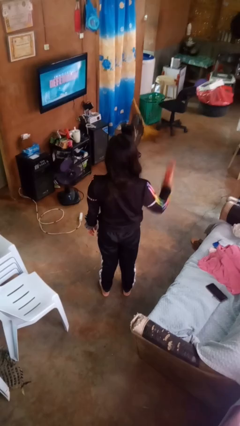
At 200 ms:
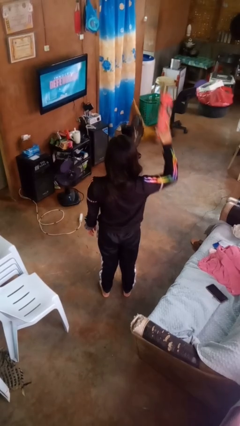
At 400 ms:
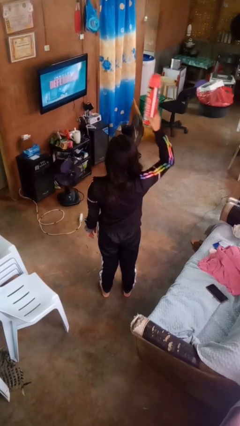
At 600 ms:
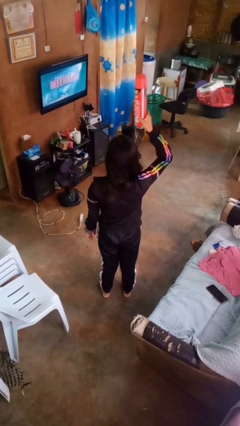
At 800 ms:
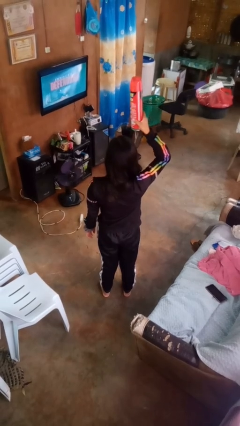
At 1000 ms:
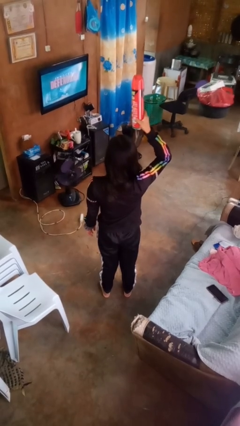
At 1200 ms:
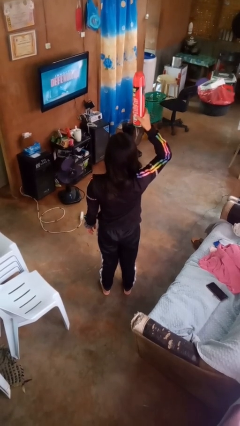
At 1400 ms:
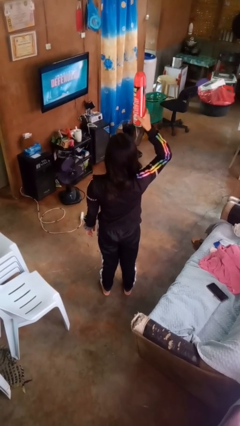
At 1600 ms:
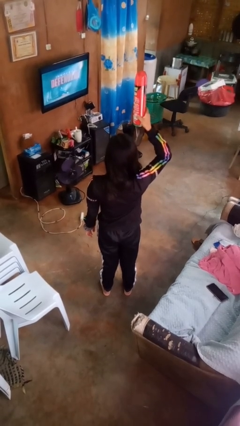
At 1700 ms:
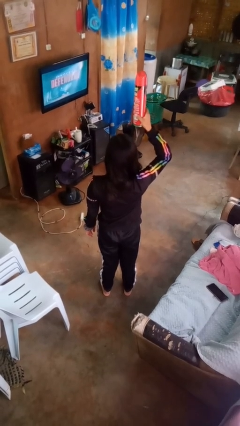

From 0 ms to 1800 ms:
person holds object above head

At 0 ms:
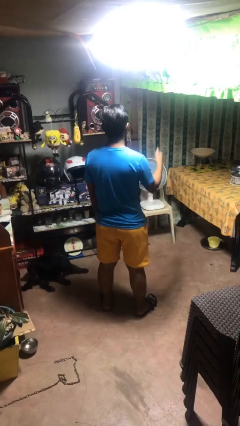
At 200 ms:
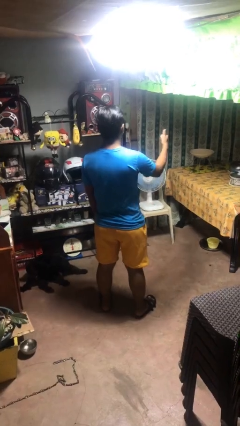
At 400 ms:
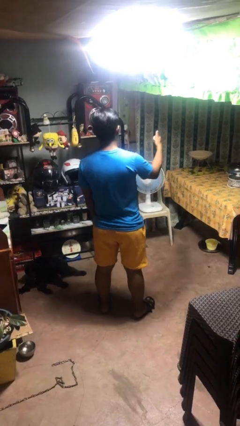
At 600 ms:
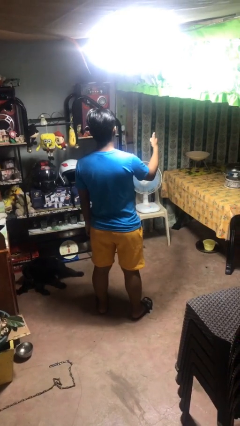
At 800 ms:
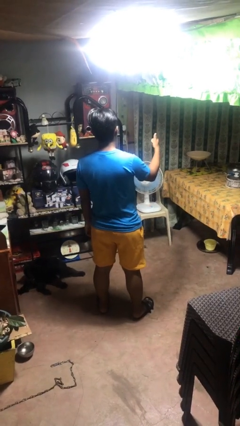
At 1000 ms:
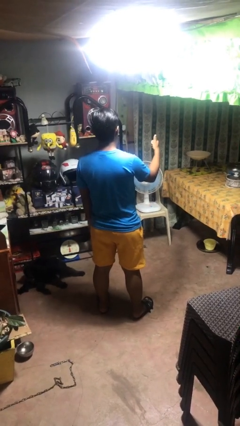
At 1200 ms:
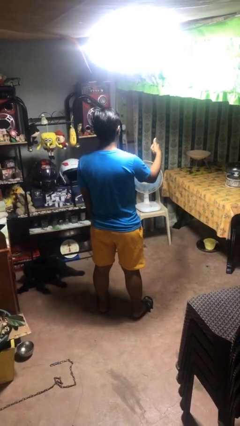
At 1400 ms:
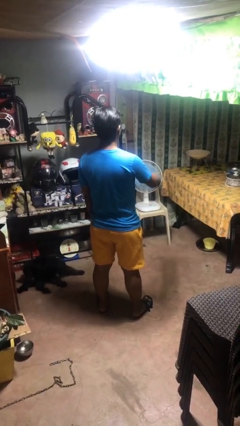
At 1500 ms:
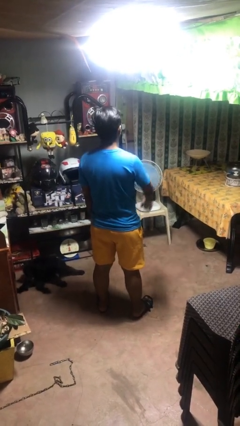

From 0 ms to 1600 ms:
person gestures thumbs up

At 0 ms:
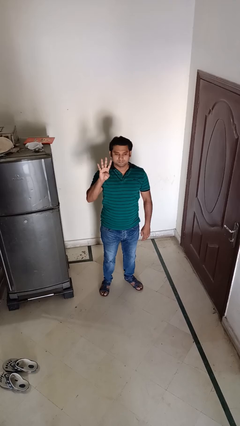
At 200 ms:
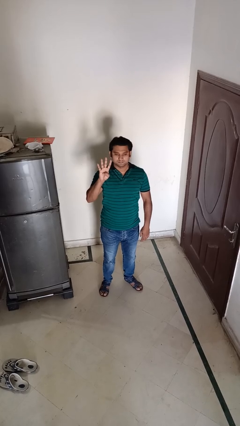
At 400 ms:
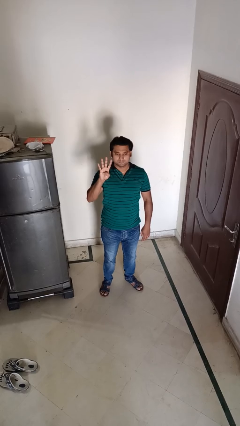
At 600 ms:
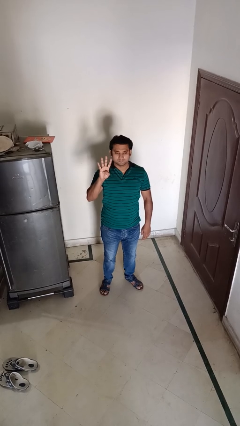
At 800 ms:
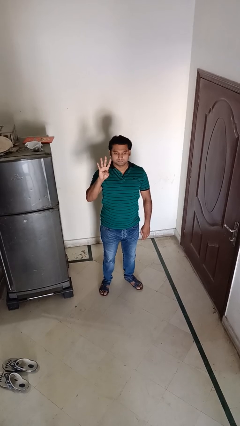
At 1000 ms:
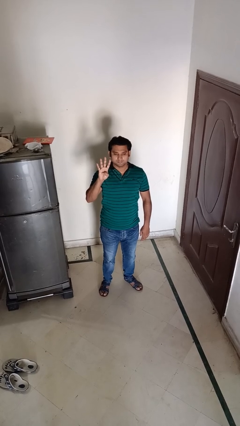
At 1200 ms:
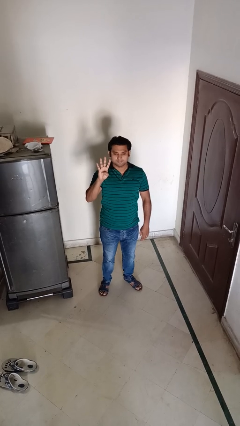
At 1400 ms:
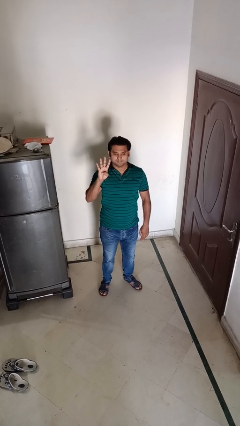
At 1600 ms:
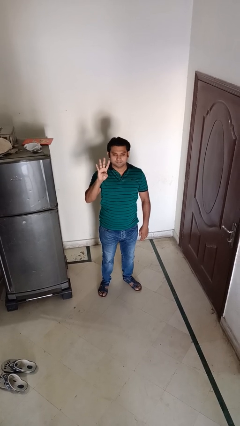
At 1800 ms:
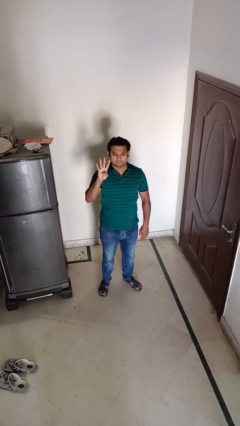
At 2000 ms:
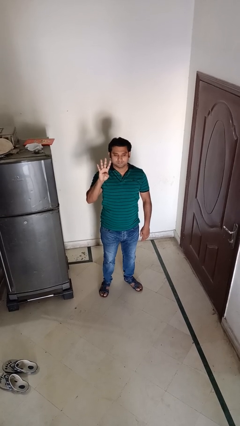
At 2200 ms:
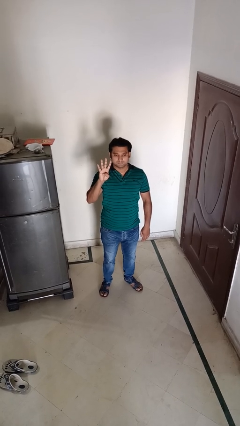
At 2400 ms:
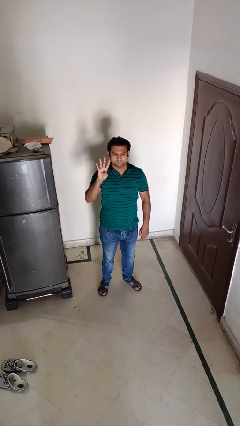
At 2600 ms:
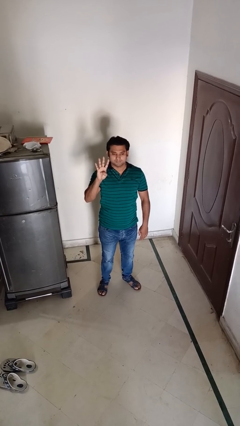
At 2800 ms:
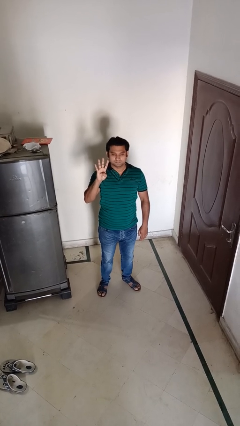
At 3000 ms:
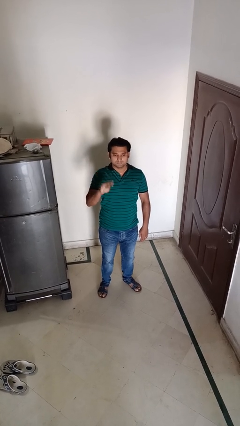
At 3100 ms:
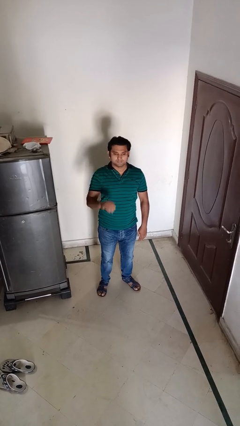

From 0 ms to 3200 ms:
person gestures number four

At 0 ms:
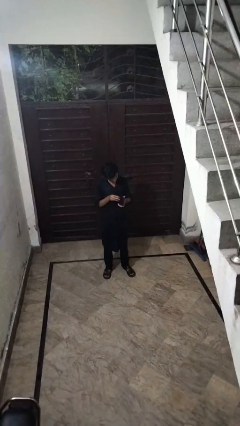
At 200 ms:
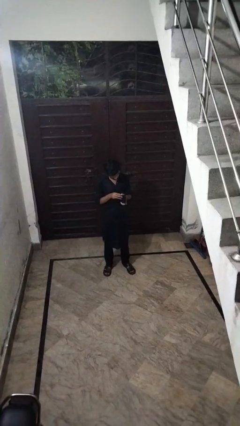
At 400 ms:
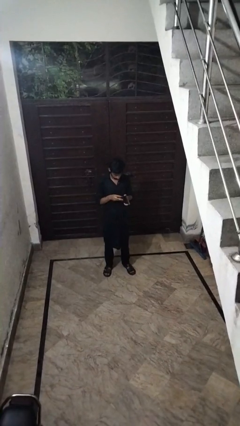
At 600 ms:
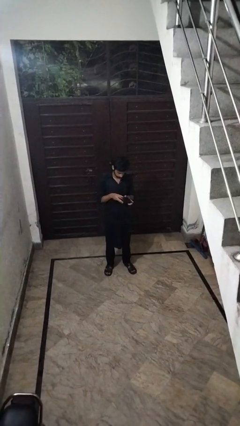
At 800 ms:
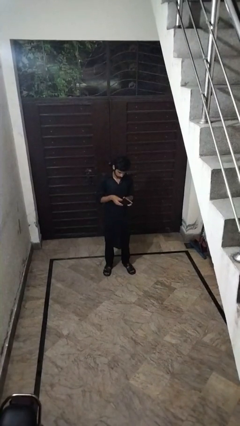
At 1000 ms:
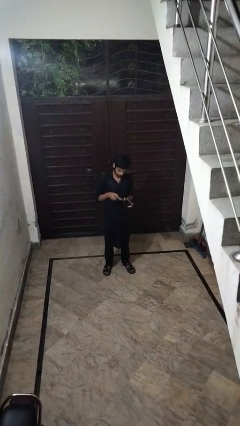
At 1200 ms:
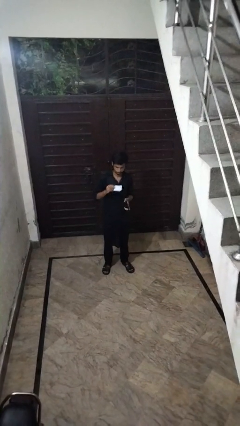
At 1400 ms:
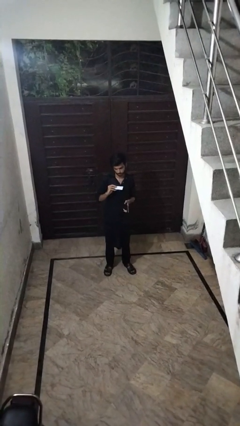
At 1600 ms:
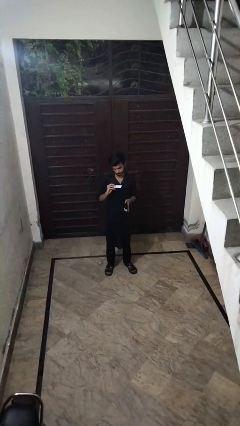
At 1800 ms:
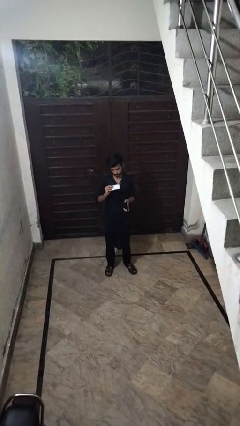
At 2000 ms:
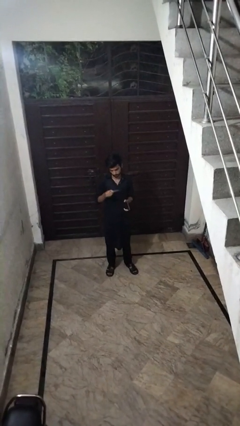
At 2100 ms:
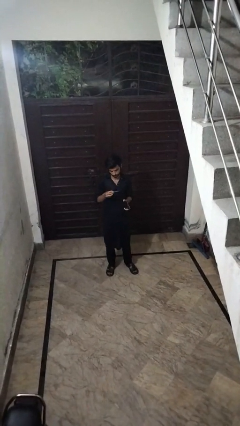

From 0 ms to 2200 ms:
person takes object from purse

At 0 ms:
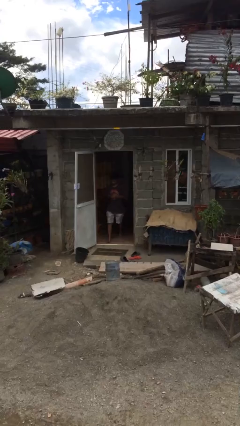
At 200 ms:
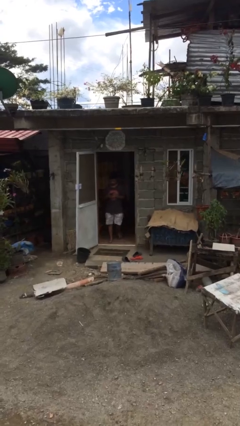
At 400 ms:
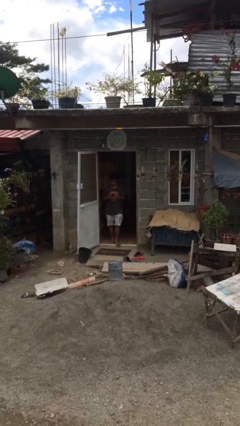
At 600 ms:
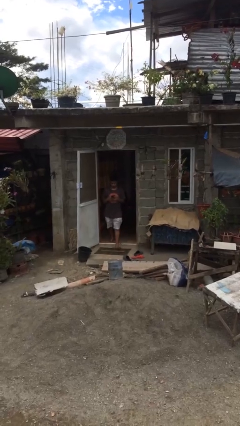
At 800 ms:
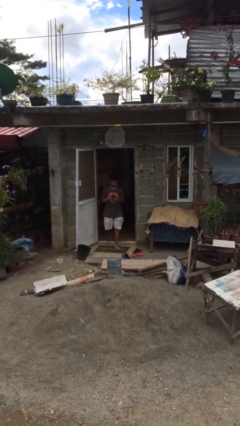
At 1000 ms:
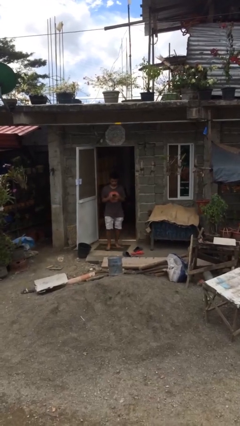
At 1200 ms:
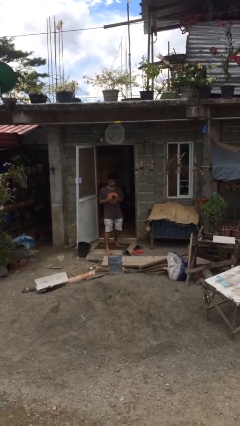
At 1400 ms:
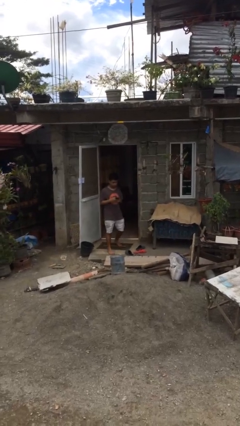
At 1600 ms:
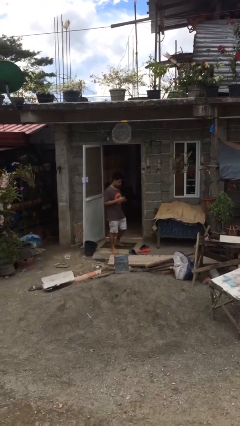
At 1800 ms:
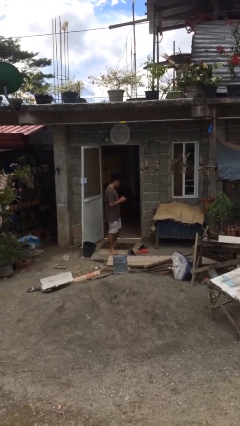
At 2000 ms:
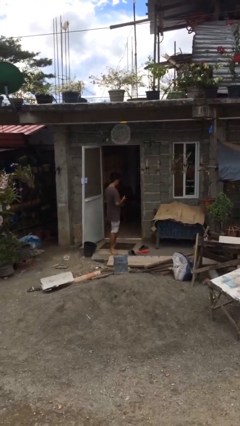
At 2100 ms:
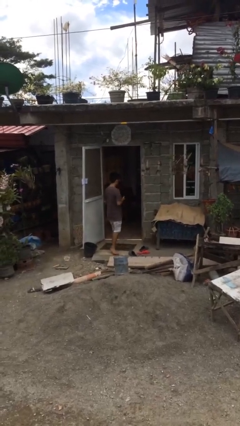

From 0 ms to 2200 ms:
person enters scene through structure

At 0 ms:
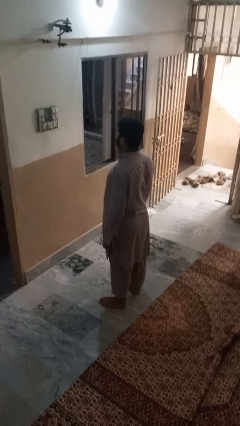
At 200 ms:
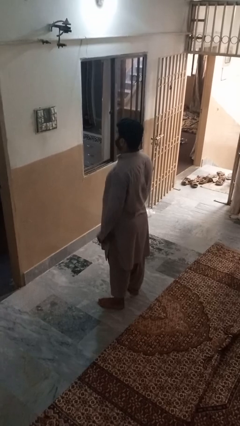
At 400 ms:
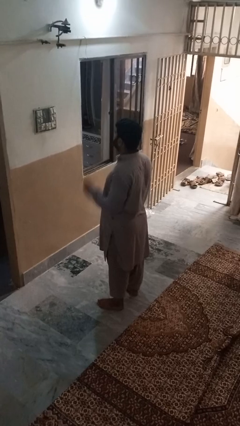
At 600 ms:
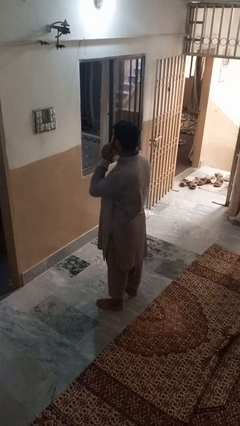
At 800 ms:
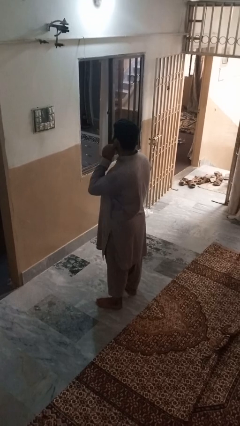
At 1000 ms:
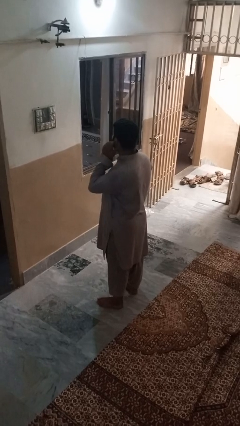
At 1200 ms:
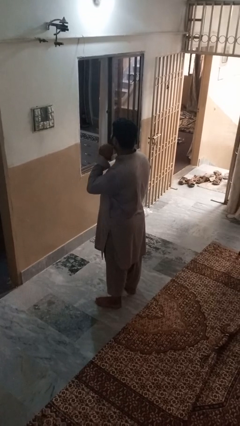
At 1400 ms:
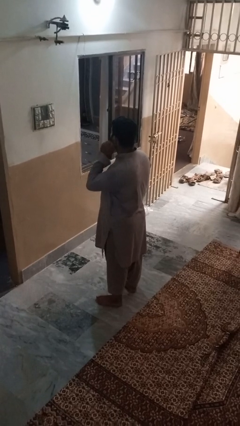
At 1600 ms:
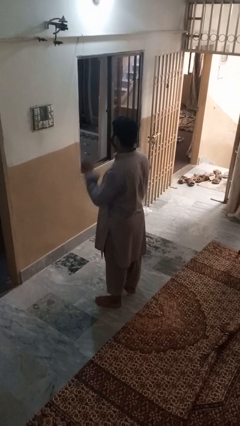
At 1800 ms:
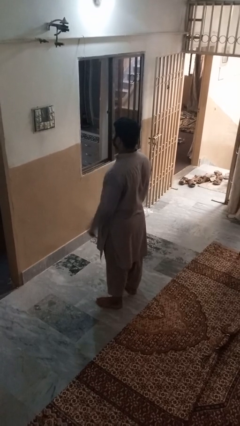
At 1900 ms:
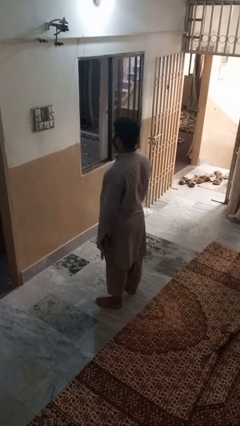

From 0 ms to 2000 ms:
person touches earlobe

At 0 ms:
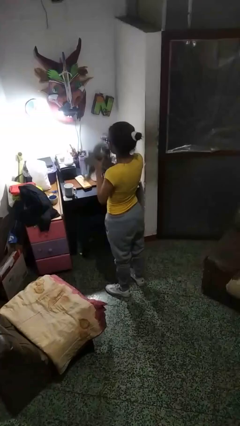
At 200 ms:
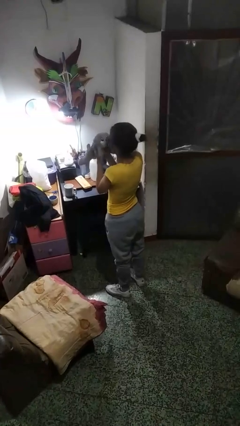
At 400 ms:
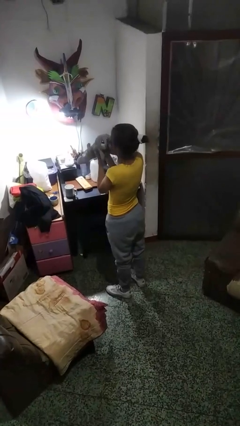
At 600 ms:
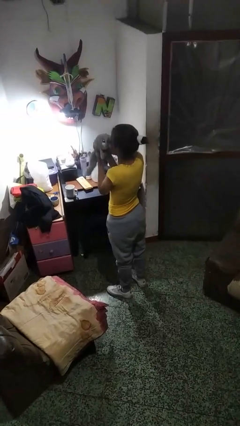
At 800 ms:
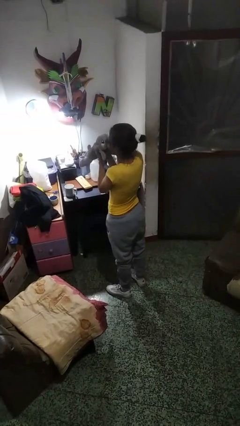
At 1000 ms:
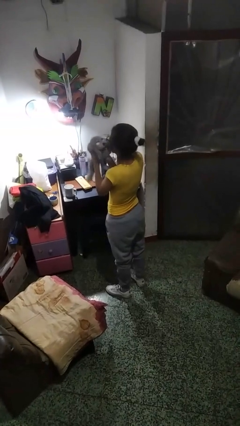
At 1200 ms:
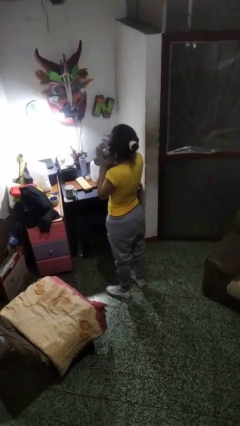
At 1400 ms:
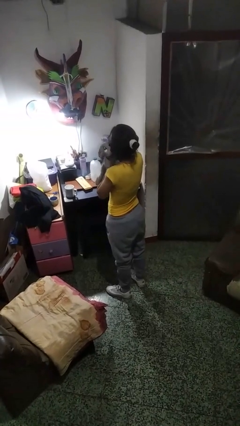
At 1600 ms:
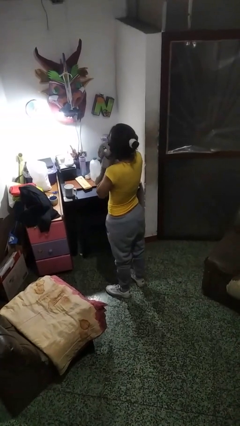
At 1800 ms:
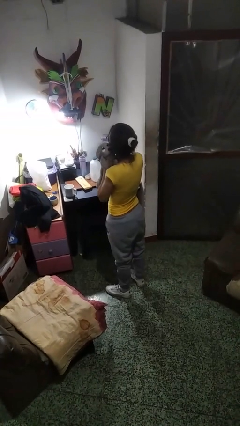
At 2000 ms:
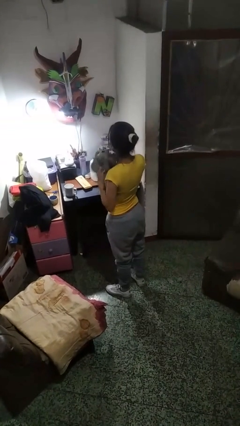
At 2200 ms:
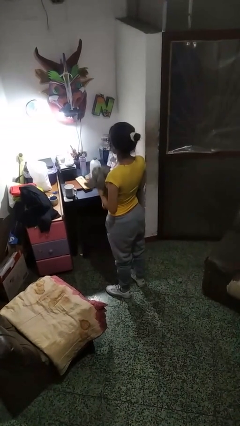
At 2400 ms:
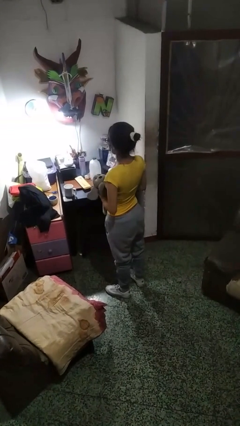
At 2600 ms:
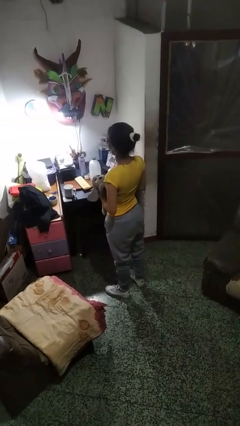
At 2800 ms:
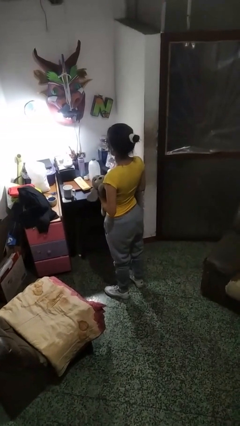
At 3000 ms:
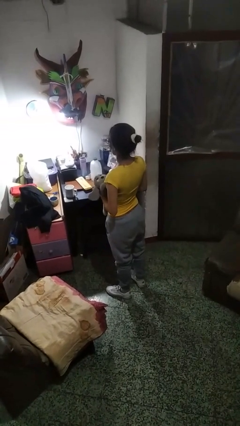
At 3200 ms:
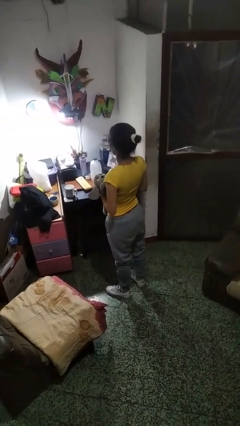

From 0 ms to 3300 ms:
person hugs stuffed animal

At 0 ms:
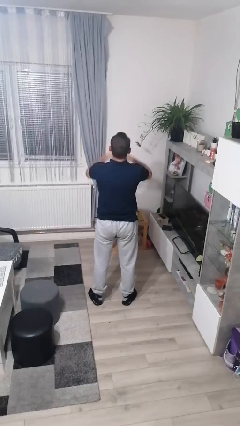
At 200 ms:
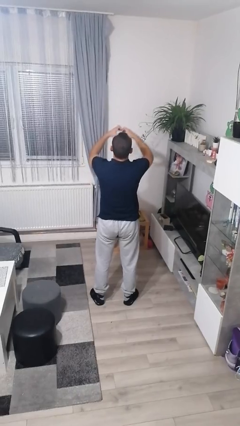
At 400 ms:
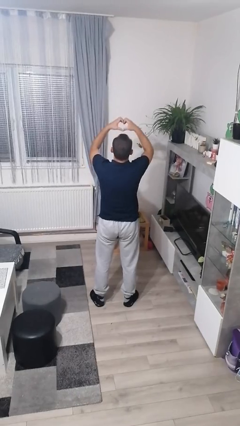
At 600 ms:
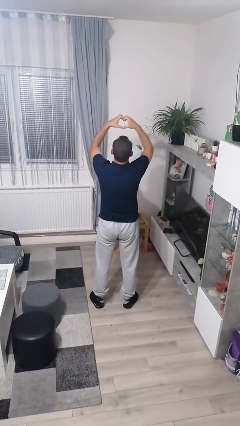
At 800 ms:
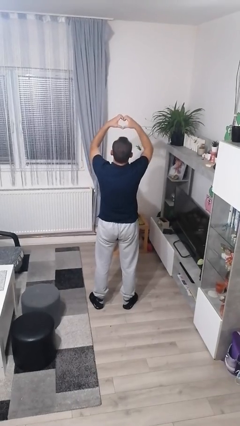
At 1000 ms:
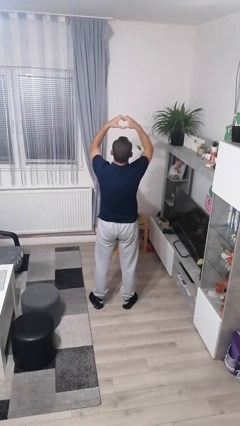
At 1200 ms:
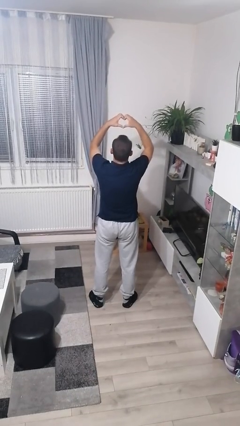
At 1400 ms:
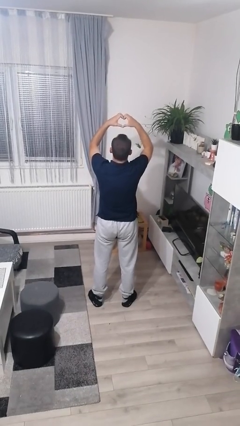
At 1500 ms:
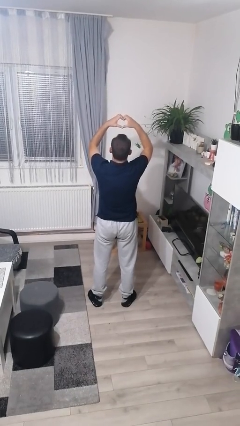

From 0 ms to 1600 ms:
person gestures heart
